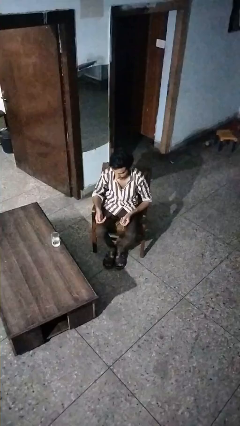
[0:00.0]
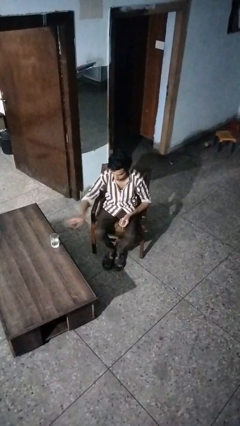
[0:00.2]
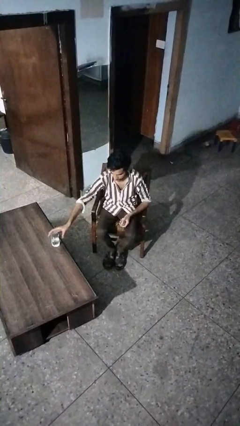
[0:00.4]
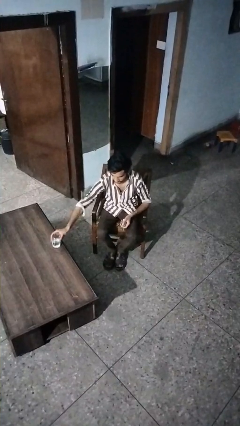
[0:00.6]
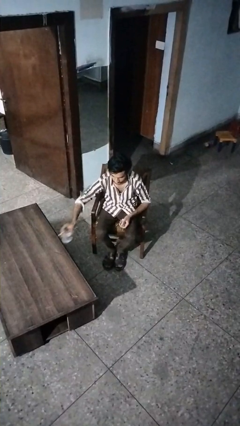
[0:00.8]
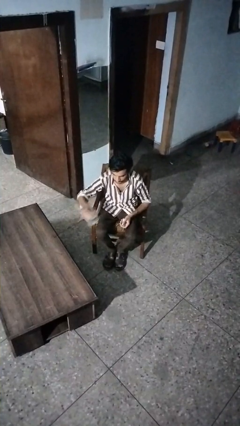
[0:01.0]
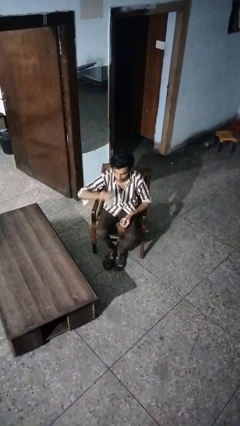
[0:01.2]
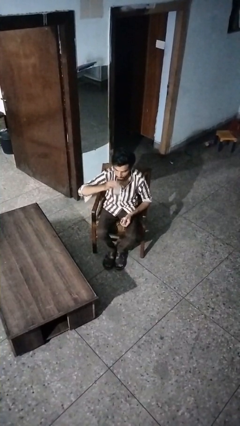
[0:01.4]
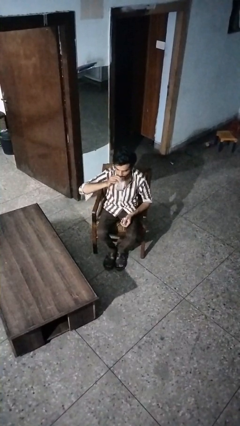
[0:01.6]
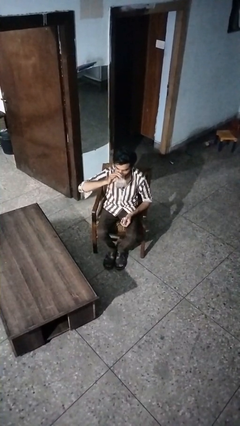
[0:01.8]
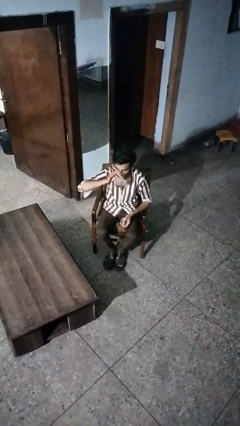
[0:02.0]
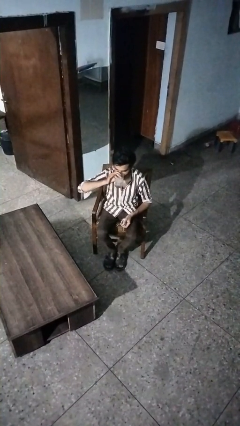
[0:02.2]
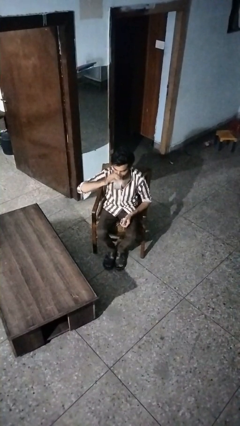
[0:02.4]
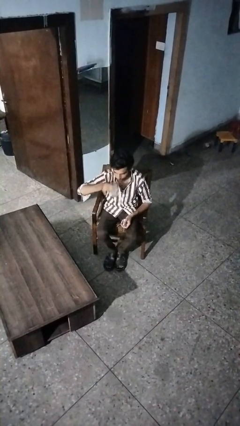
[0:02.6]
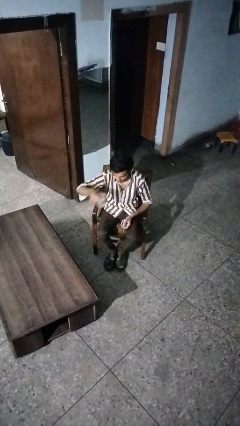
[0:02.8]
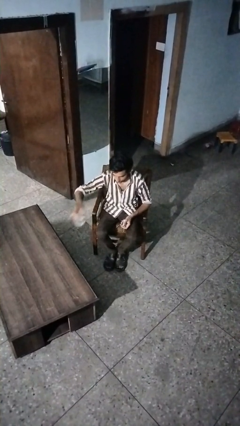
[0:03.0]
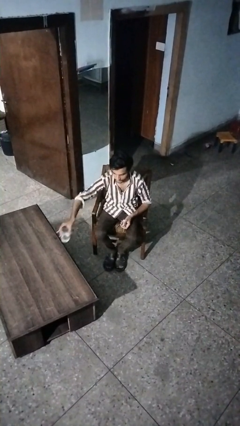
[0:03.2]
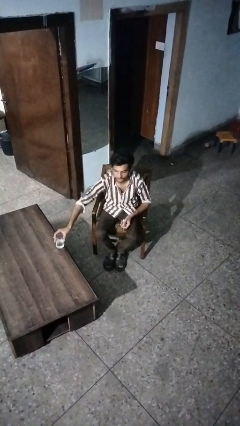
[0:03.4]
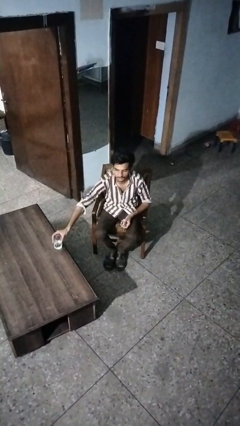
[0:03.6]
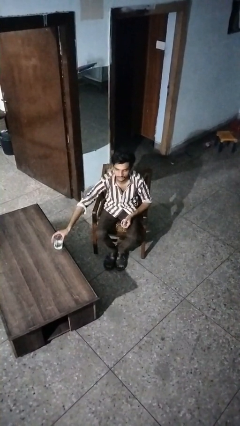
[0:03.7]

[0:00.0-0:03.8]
person drinks from cup

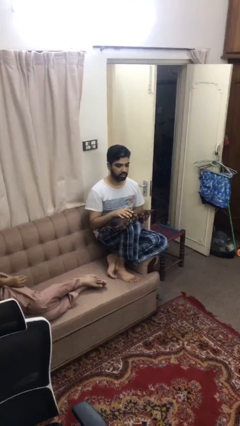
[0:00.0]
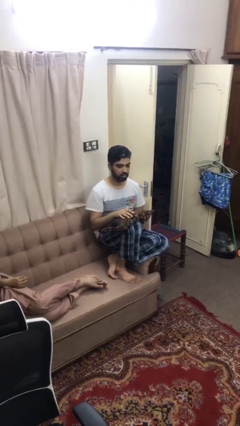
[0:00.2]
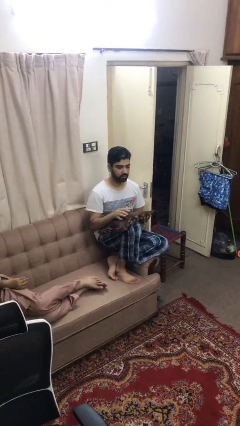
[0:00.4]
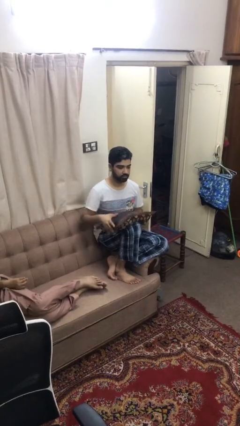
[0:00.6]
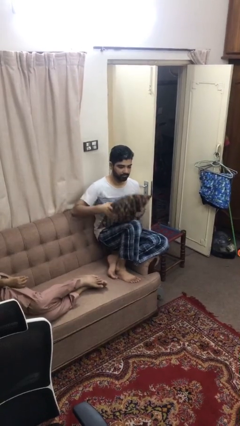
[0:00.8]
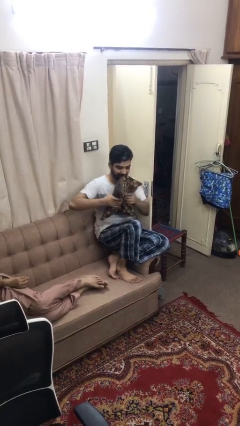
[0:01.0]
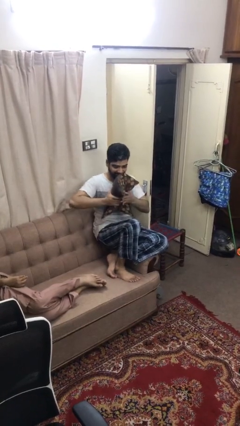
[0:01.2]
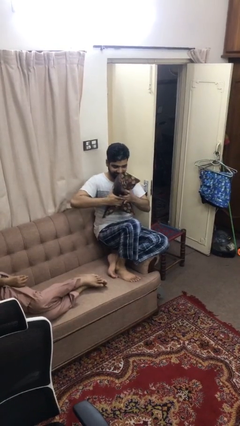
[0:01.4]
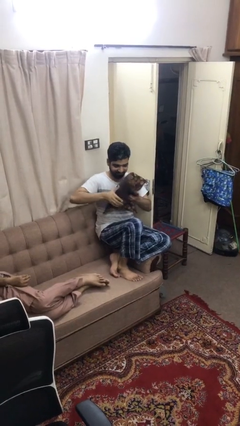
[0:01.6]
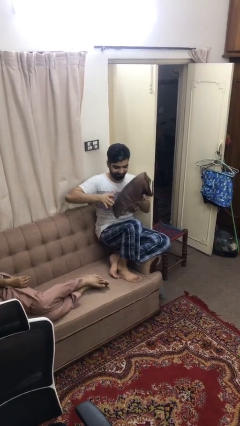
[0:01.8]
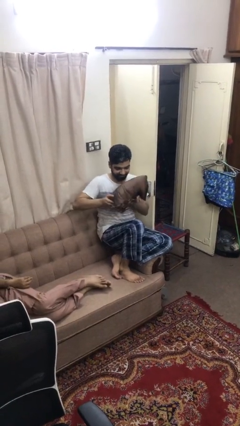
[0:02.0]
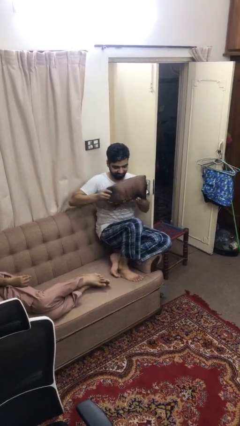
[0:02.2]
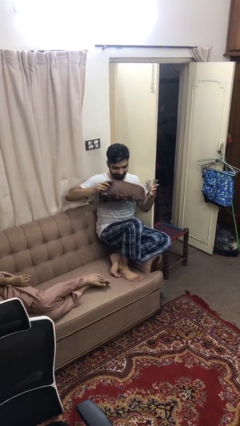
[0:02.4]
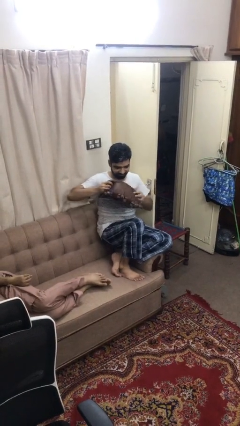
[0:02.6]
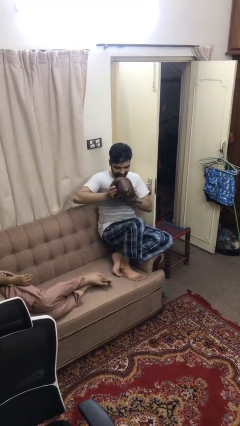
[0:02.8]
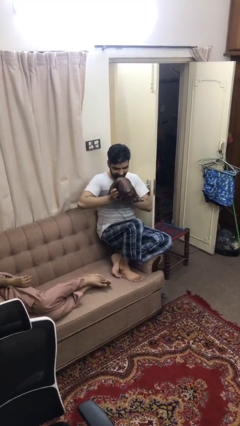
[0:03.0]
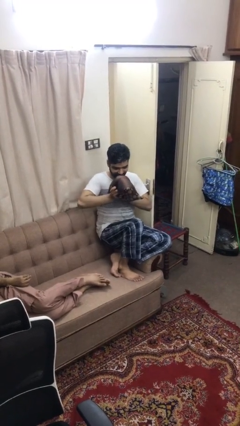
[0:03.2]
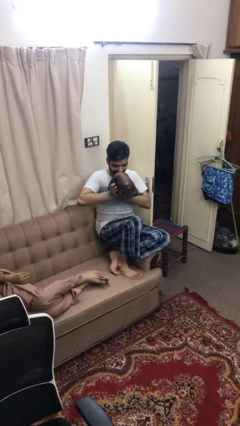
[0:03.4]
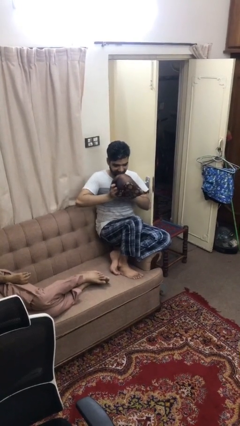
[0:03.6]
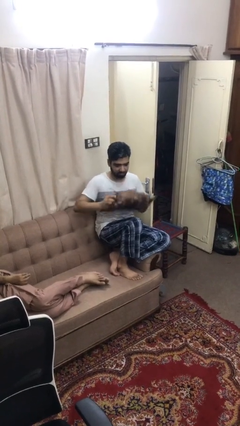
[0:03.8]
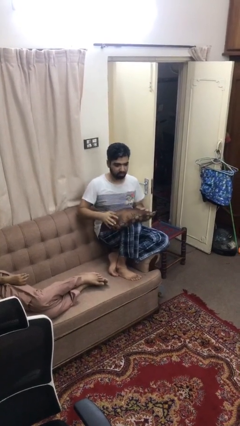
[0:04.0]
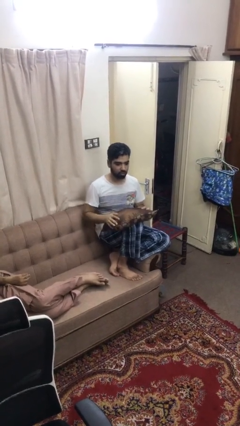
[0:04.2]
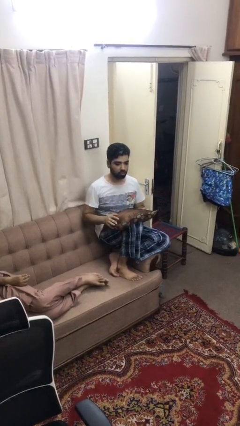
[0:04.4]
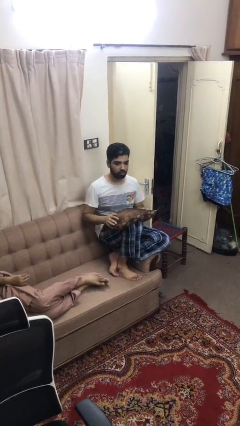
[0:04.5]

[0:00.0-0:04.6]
person squeezes object

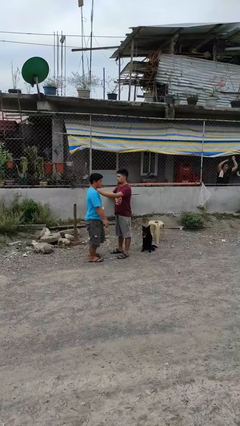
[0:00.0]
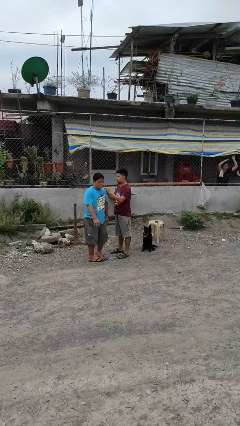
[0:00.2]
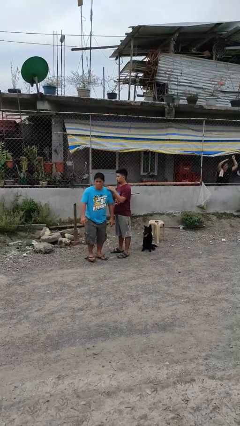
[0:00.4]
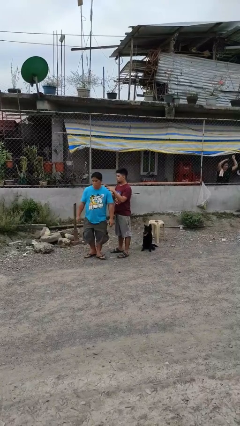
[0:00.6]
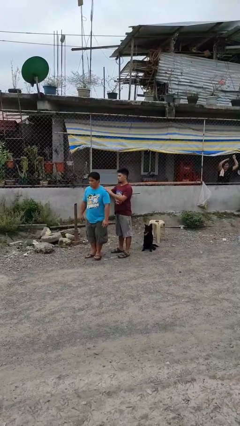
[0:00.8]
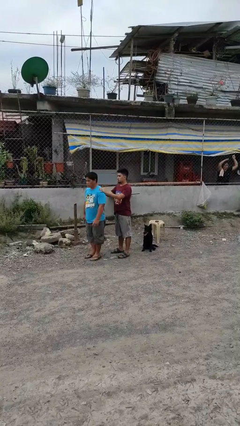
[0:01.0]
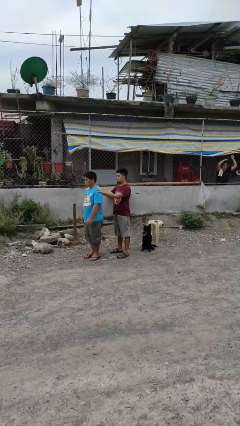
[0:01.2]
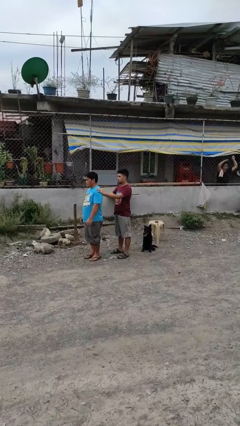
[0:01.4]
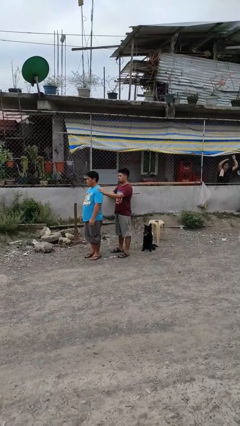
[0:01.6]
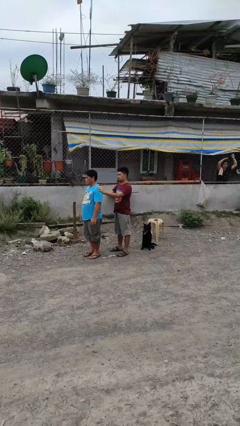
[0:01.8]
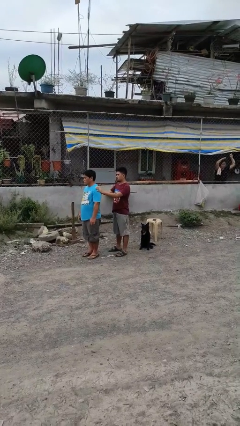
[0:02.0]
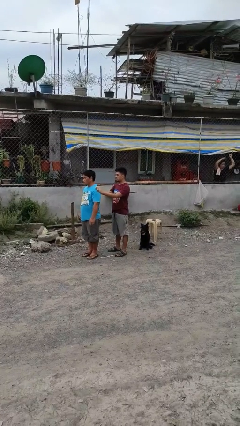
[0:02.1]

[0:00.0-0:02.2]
person spins person around

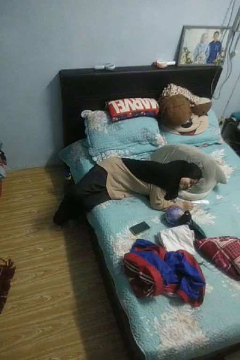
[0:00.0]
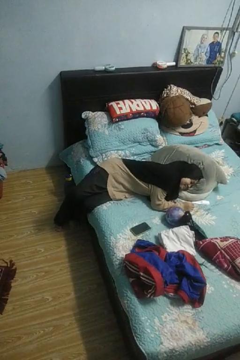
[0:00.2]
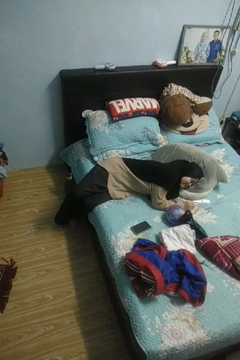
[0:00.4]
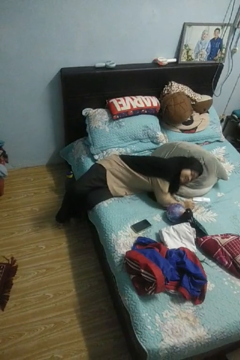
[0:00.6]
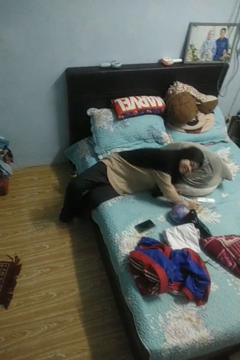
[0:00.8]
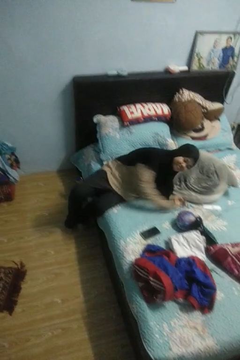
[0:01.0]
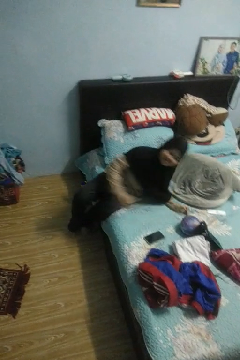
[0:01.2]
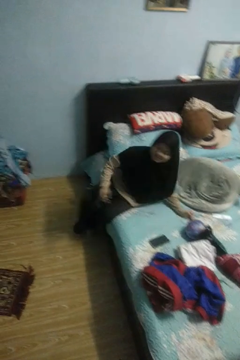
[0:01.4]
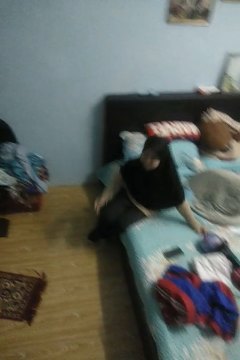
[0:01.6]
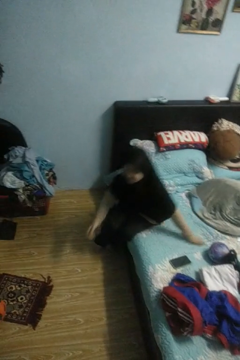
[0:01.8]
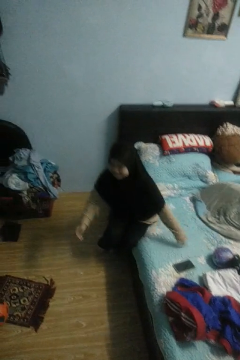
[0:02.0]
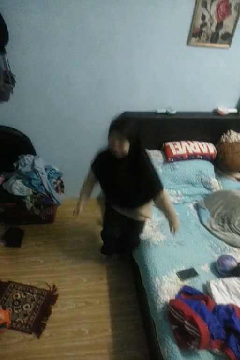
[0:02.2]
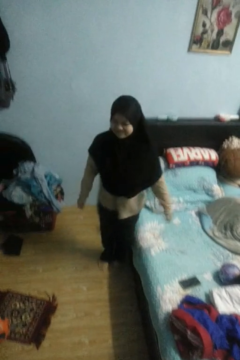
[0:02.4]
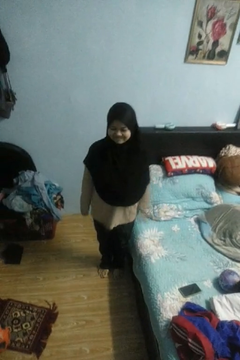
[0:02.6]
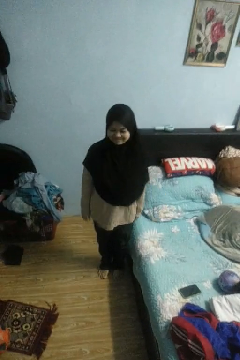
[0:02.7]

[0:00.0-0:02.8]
person stands up

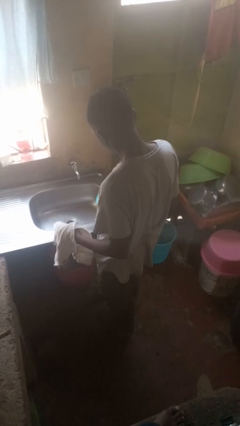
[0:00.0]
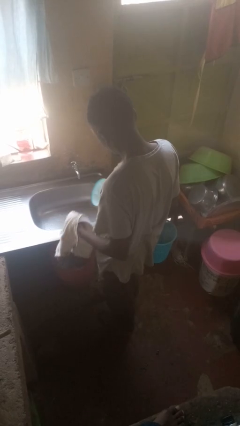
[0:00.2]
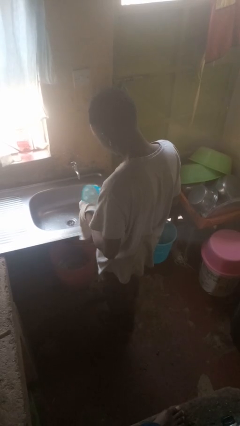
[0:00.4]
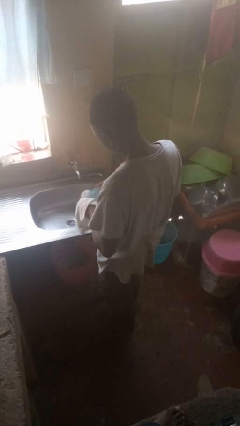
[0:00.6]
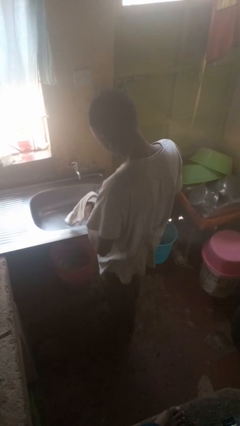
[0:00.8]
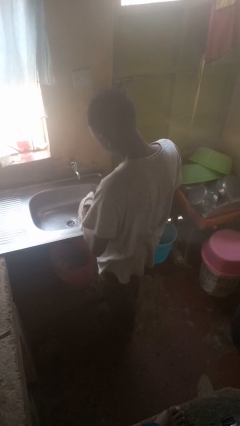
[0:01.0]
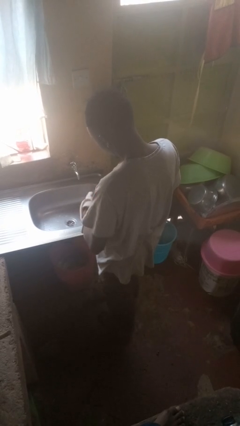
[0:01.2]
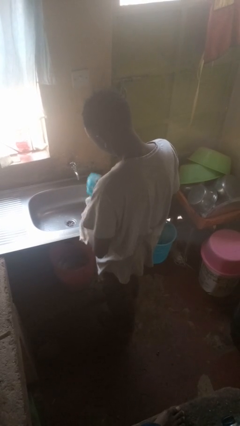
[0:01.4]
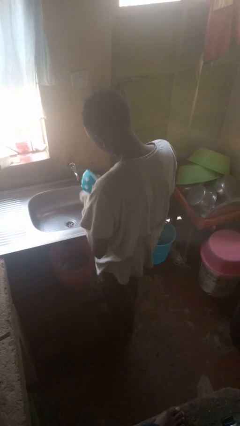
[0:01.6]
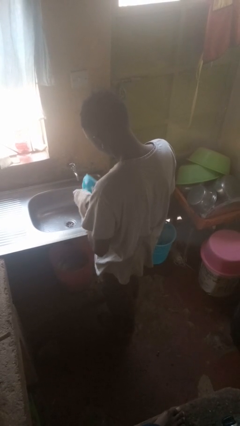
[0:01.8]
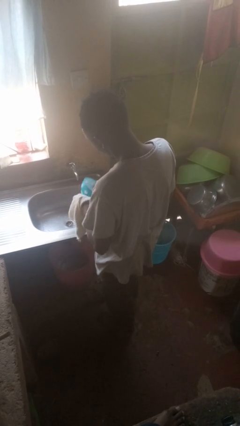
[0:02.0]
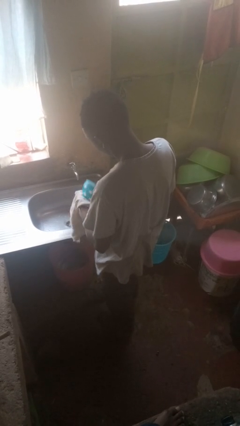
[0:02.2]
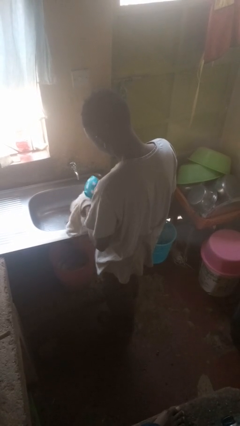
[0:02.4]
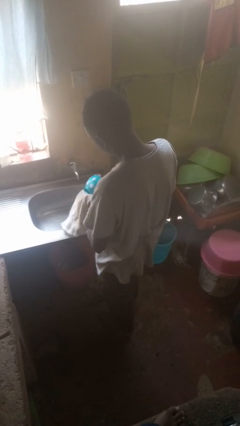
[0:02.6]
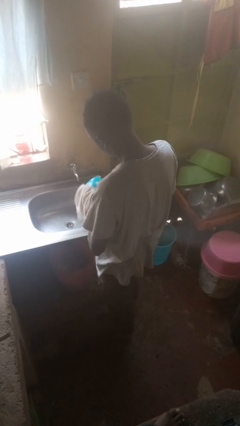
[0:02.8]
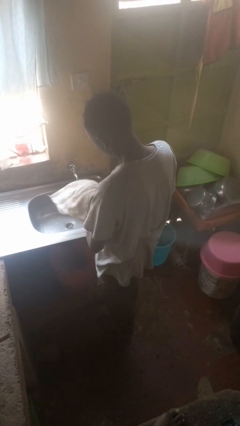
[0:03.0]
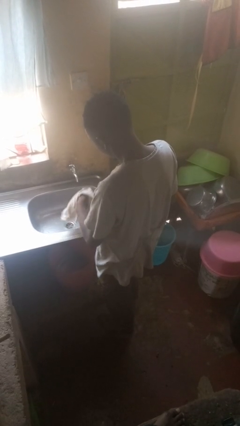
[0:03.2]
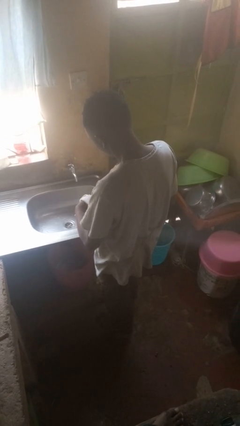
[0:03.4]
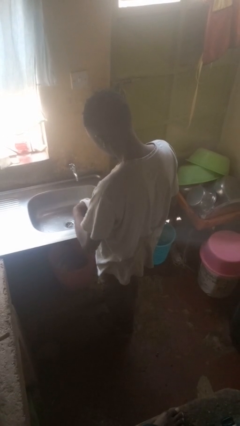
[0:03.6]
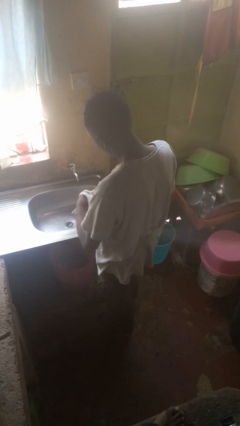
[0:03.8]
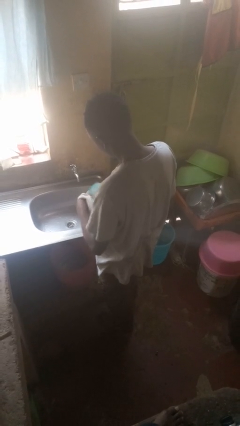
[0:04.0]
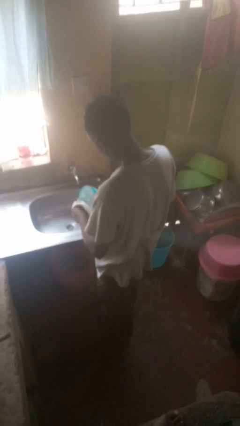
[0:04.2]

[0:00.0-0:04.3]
person dries dish

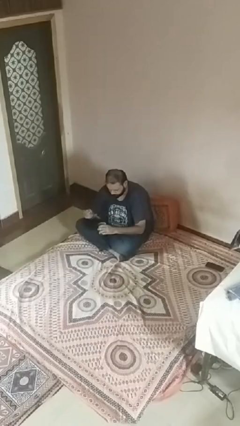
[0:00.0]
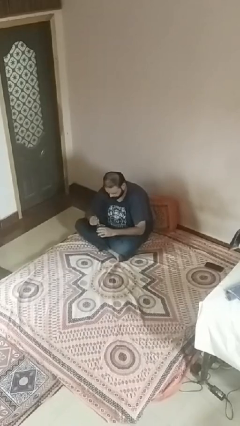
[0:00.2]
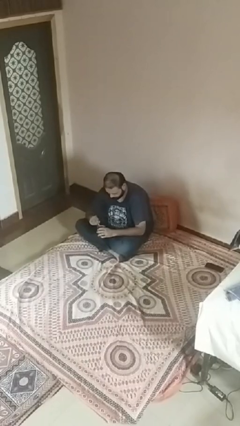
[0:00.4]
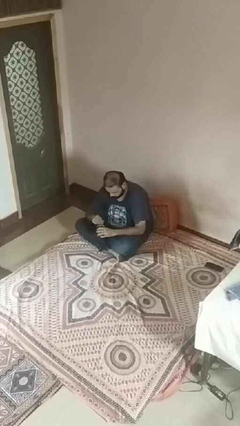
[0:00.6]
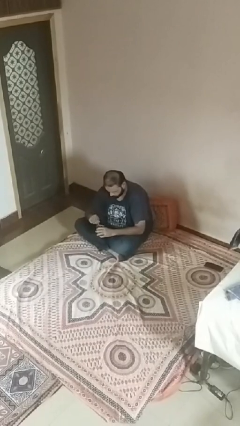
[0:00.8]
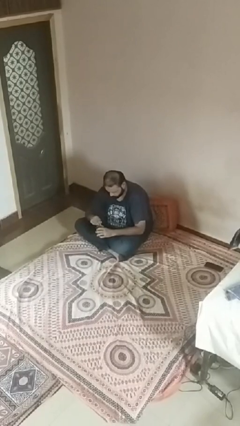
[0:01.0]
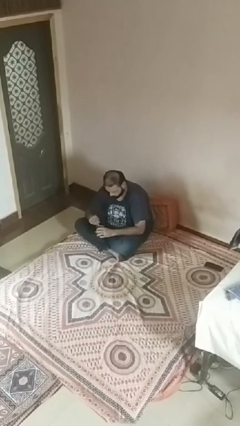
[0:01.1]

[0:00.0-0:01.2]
person stirs mug
